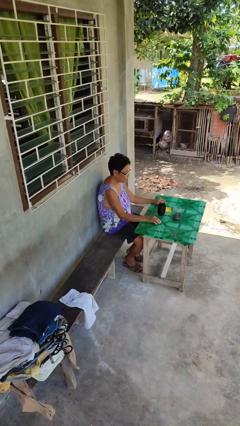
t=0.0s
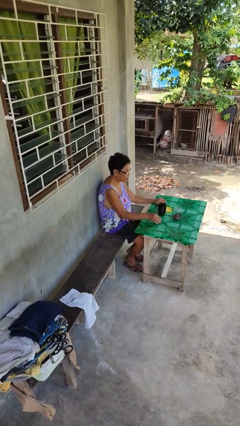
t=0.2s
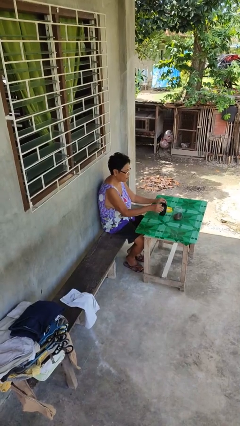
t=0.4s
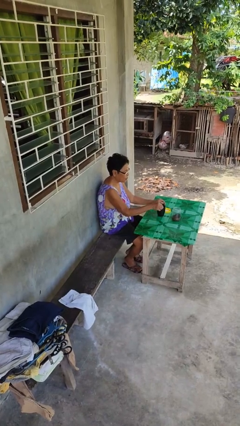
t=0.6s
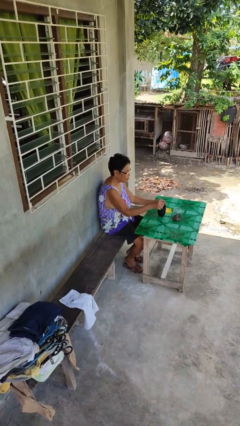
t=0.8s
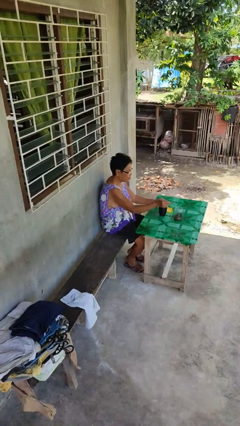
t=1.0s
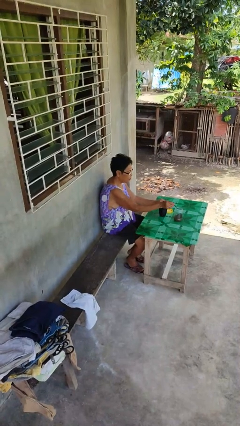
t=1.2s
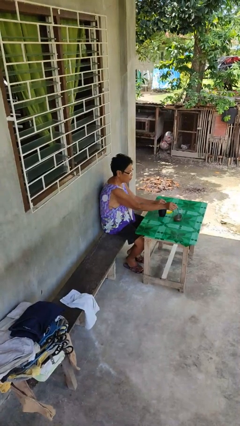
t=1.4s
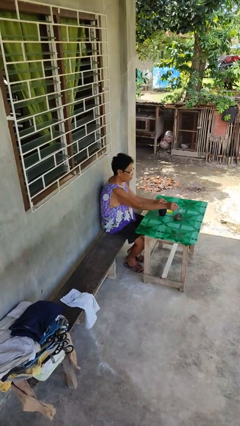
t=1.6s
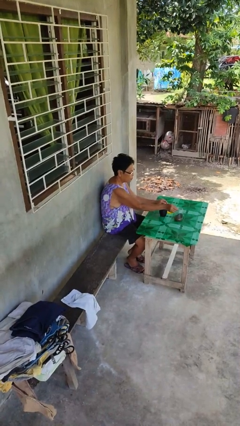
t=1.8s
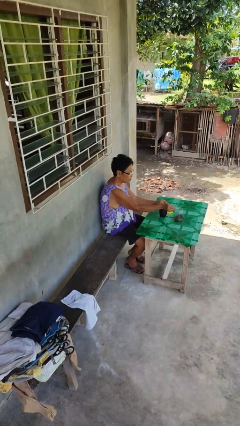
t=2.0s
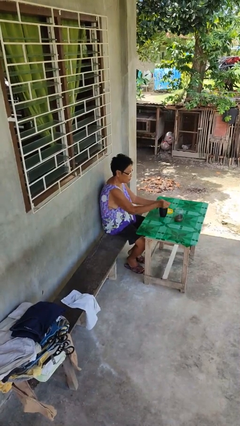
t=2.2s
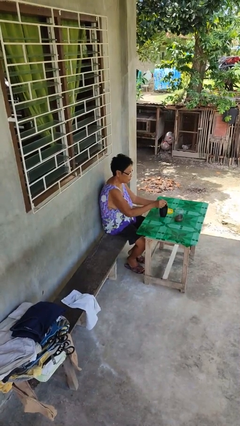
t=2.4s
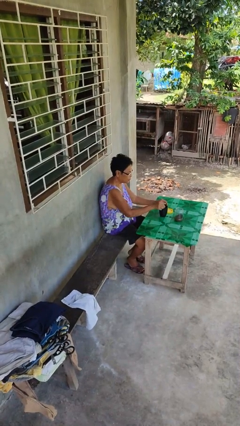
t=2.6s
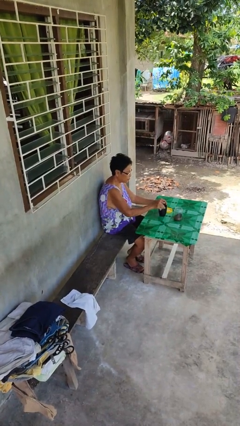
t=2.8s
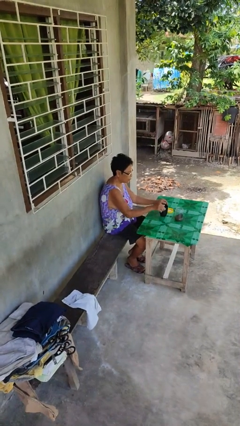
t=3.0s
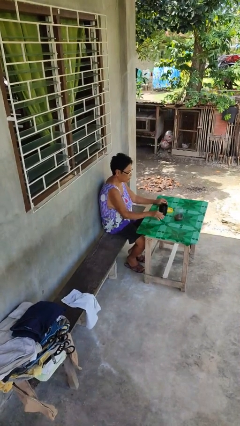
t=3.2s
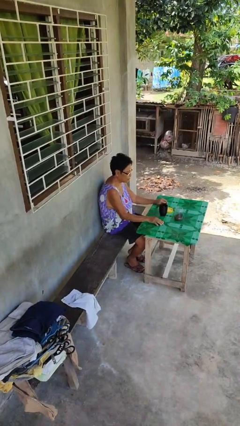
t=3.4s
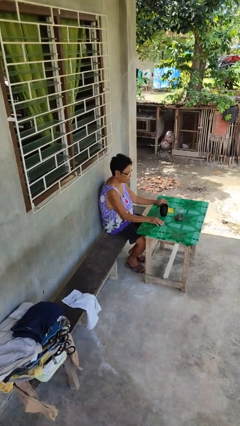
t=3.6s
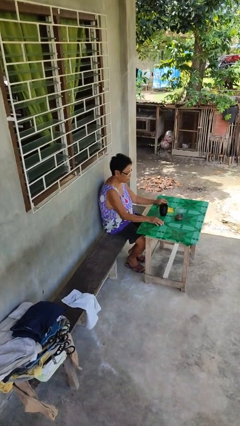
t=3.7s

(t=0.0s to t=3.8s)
person pours coffee into mug

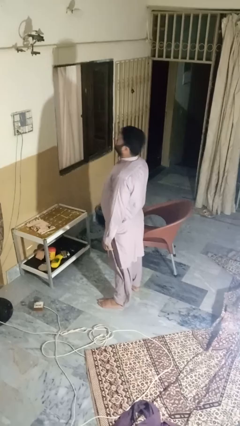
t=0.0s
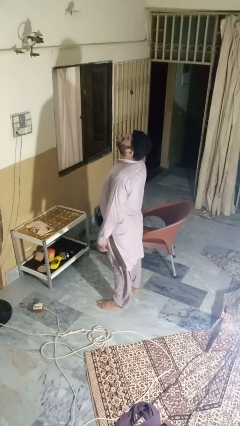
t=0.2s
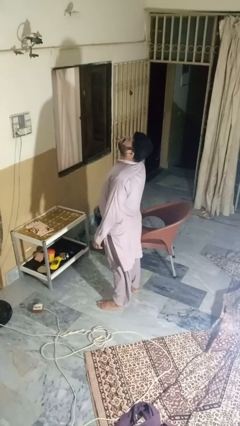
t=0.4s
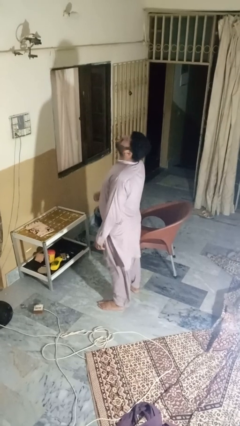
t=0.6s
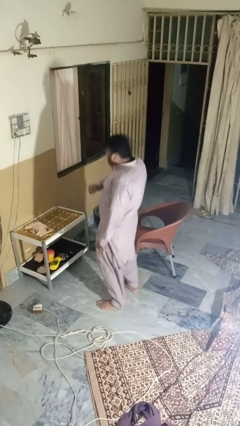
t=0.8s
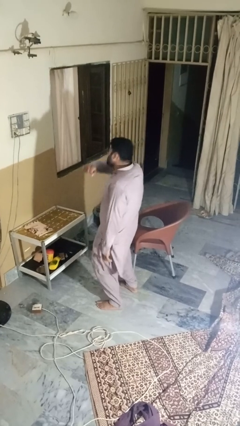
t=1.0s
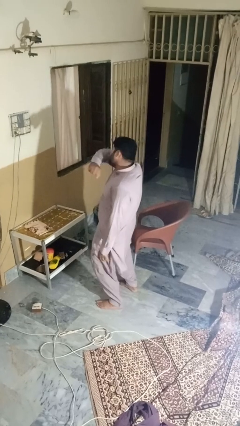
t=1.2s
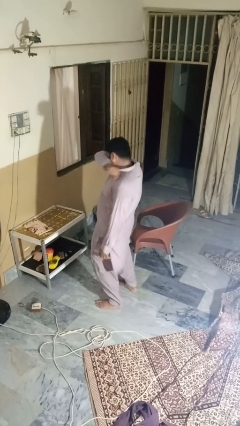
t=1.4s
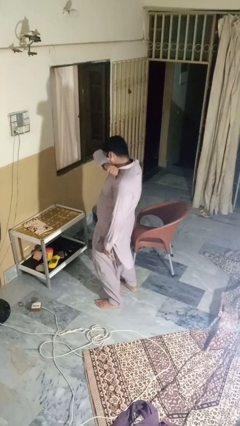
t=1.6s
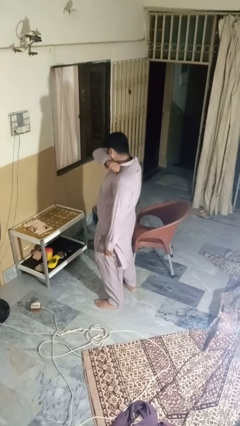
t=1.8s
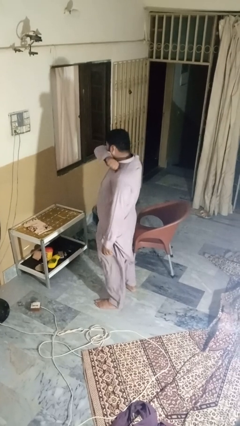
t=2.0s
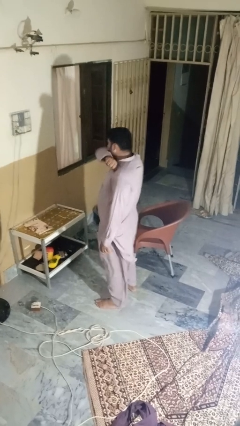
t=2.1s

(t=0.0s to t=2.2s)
person sneezes into arm

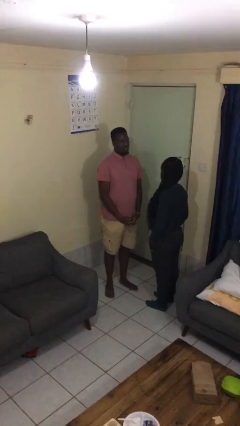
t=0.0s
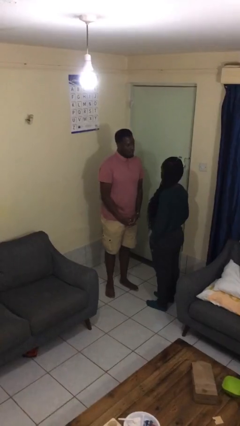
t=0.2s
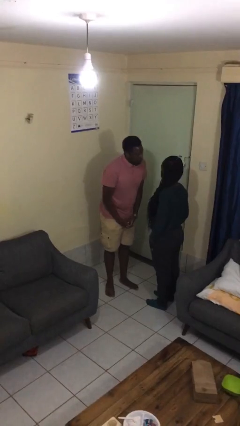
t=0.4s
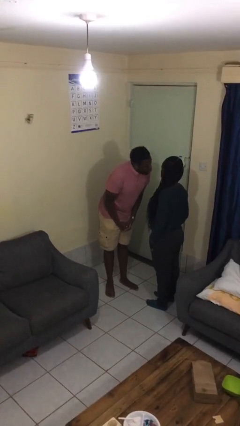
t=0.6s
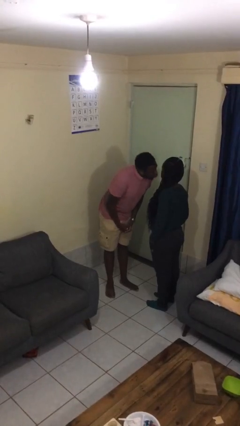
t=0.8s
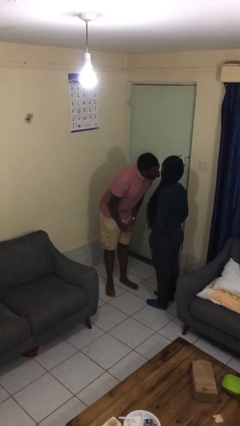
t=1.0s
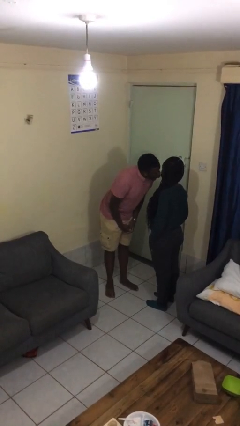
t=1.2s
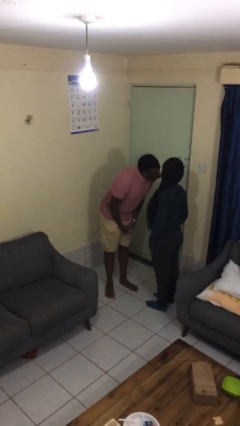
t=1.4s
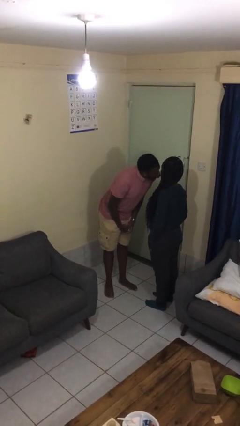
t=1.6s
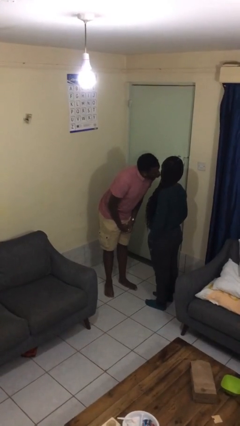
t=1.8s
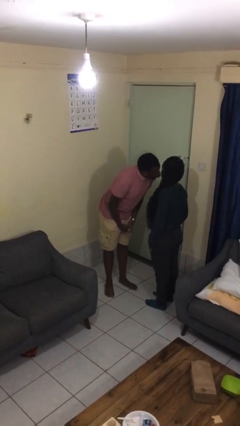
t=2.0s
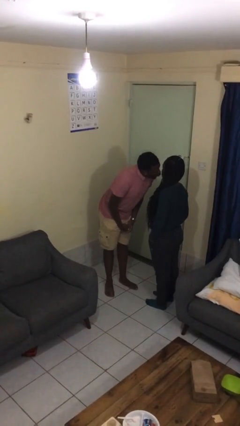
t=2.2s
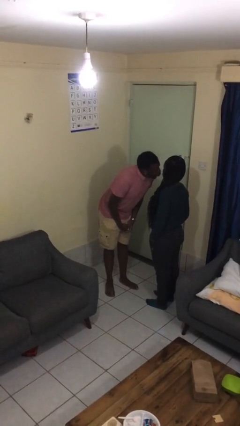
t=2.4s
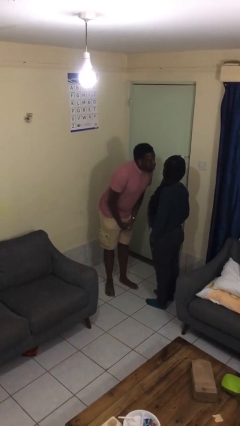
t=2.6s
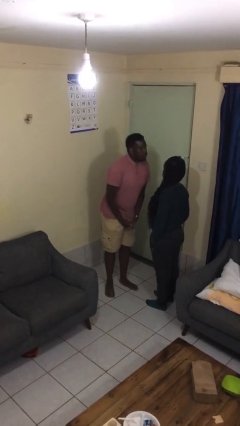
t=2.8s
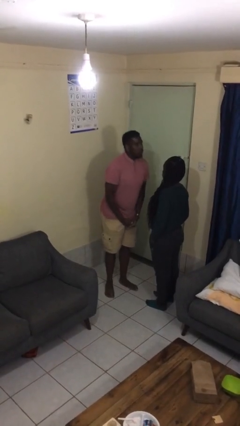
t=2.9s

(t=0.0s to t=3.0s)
person kisses cheek of person

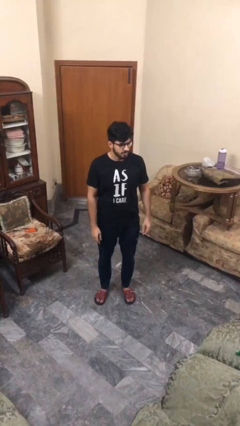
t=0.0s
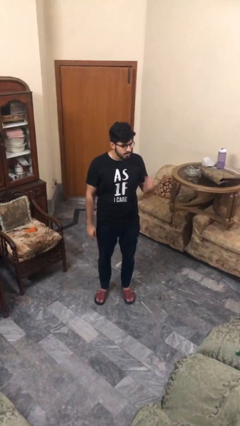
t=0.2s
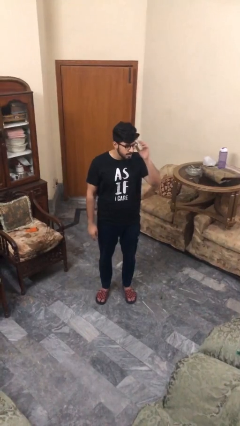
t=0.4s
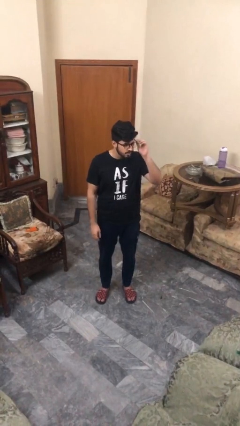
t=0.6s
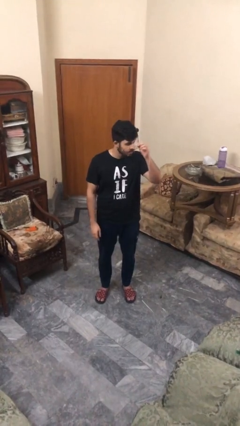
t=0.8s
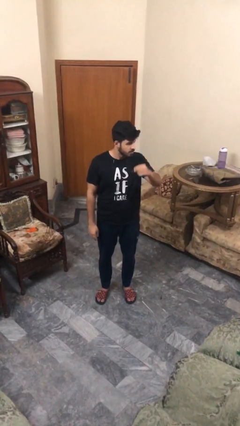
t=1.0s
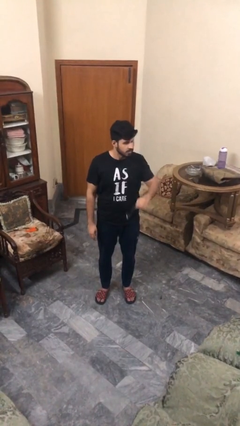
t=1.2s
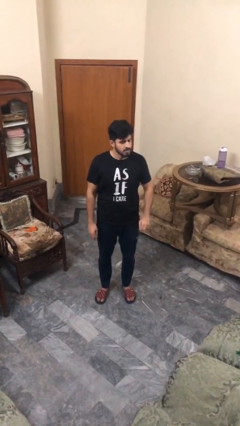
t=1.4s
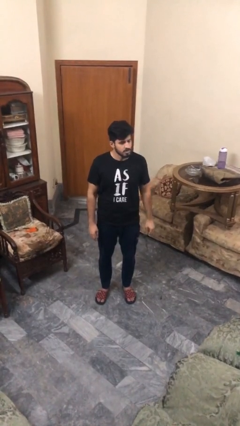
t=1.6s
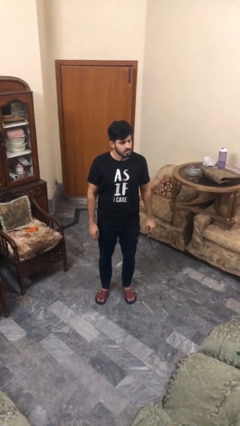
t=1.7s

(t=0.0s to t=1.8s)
person takes off glasses

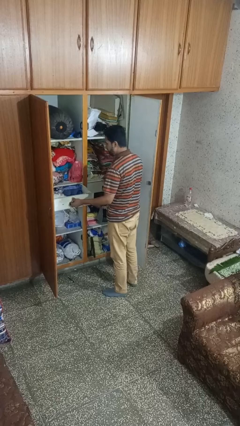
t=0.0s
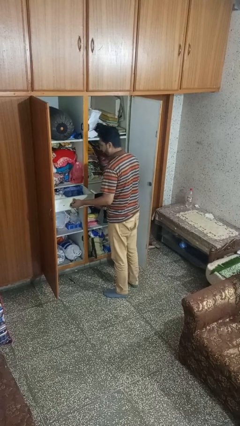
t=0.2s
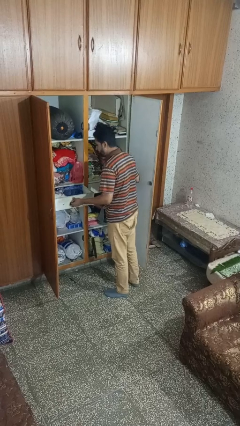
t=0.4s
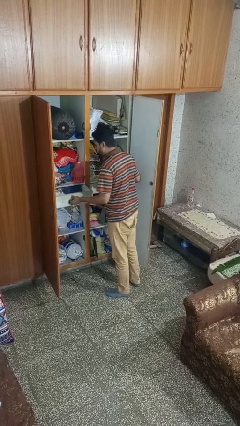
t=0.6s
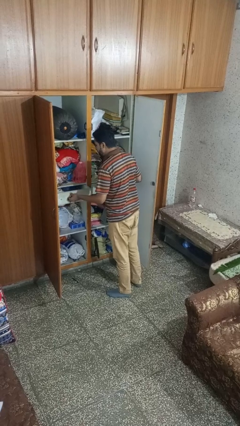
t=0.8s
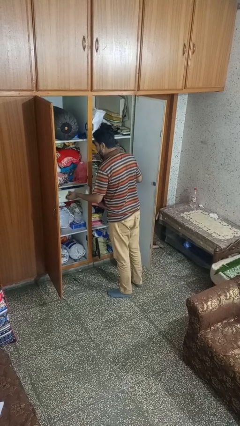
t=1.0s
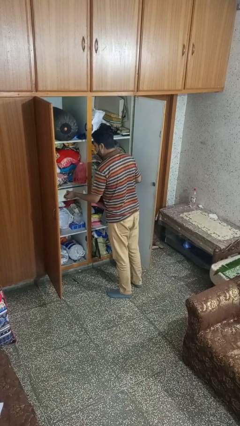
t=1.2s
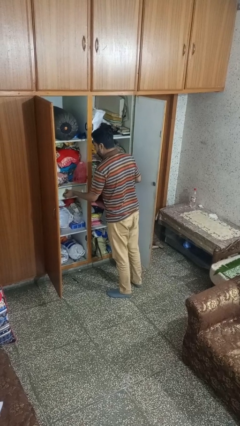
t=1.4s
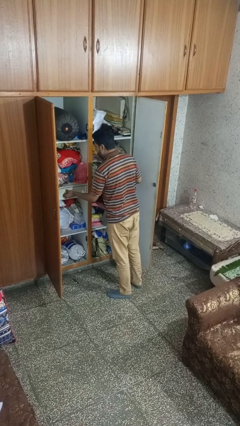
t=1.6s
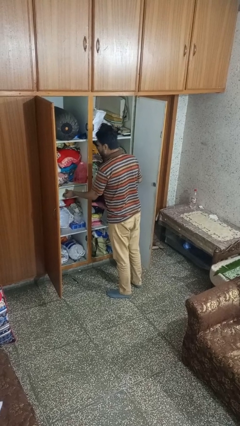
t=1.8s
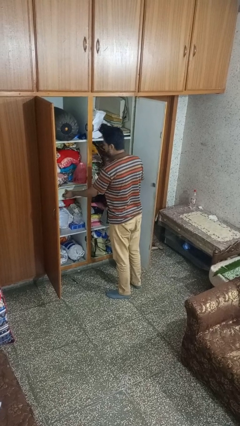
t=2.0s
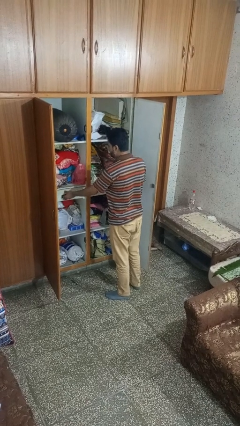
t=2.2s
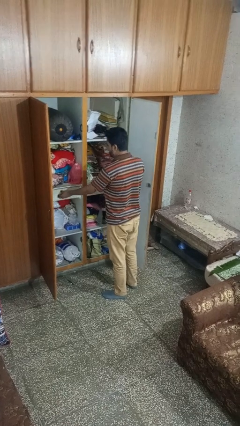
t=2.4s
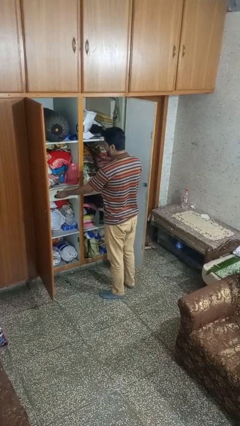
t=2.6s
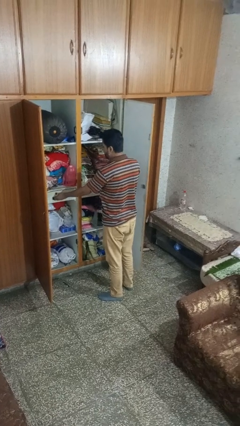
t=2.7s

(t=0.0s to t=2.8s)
person closes dresser drawer

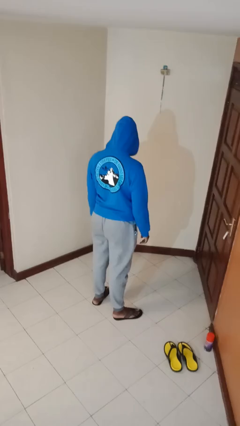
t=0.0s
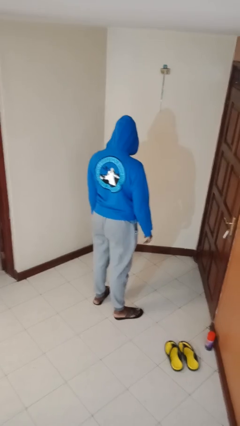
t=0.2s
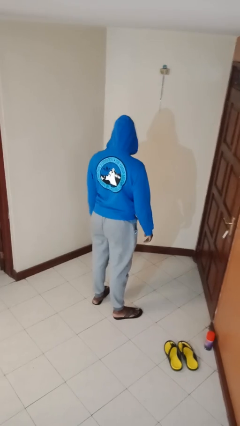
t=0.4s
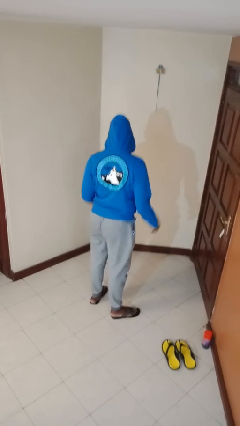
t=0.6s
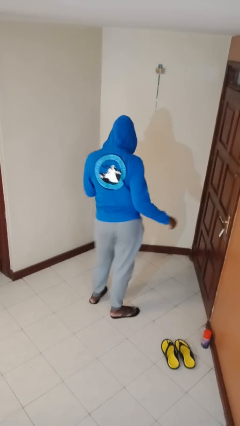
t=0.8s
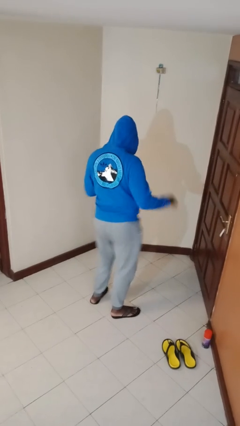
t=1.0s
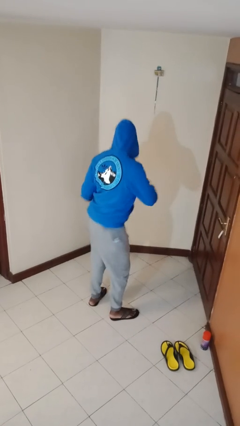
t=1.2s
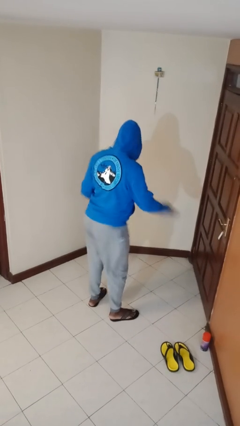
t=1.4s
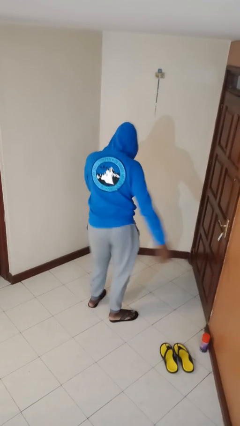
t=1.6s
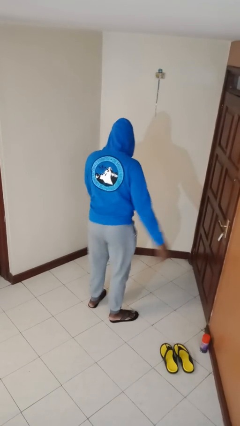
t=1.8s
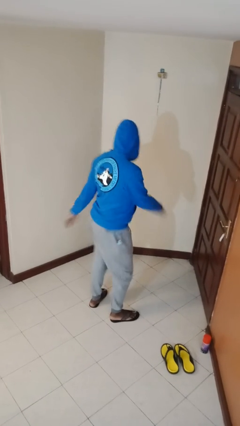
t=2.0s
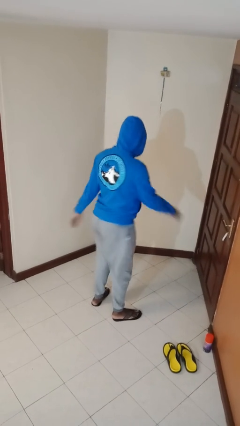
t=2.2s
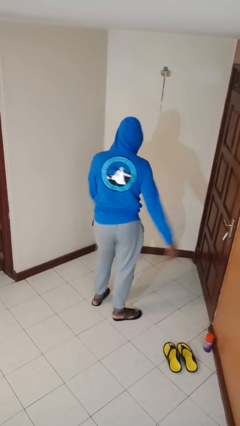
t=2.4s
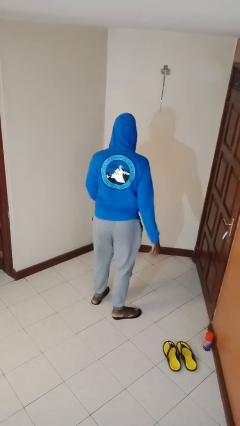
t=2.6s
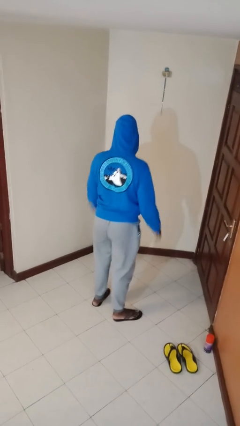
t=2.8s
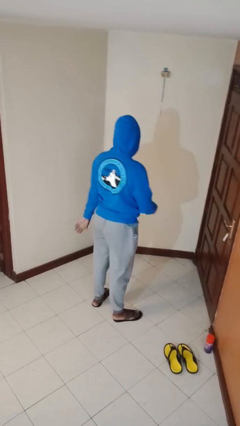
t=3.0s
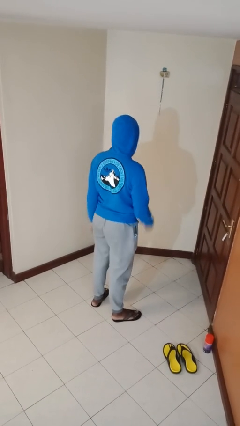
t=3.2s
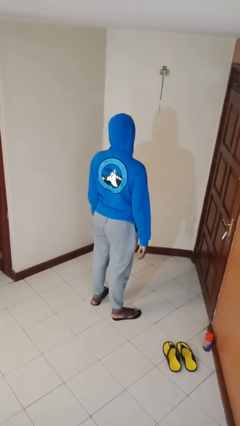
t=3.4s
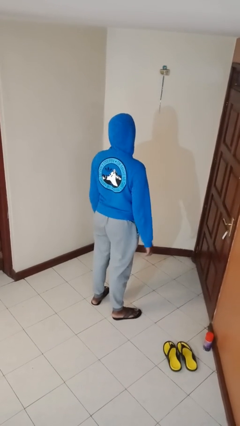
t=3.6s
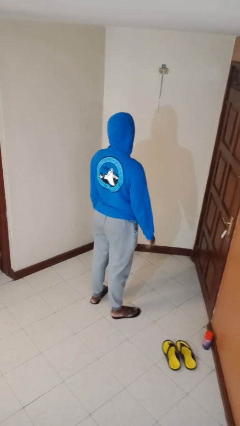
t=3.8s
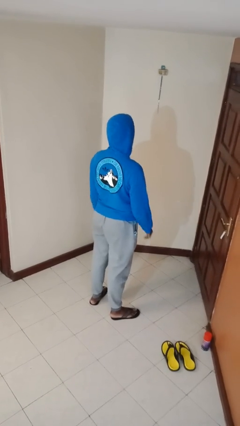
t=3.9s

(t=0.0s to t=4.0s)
person wiggles hips

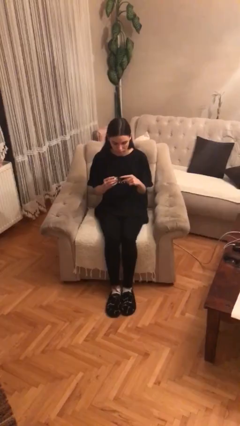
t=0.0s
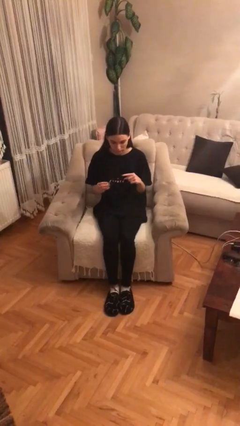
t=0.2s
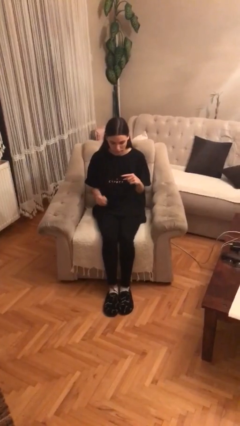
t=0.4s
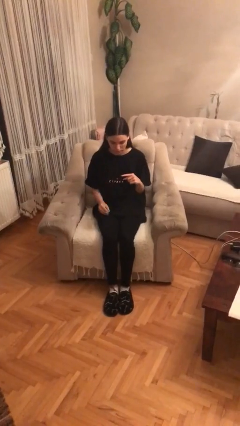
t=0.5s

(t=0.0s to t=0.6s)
person takes off ring
